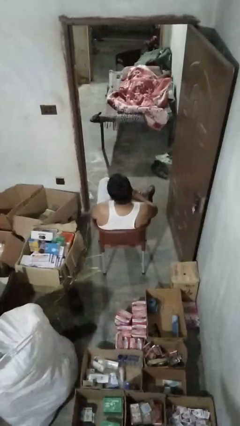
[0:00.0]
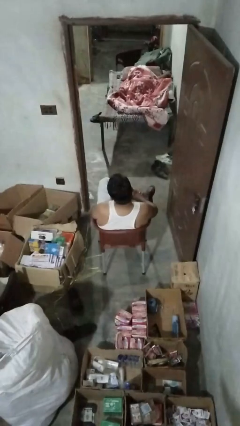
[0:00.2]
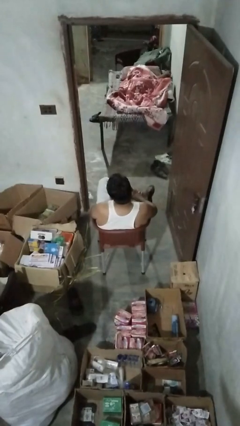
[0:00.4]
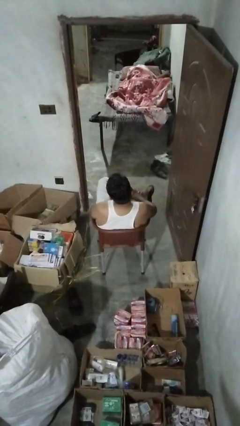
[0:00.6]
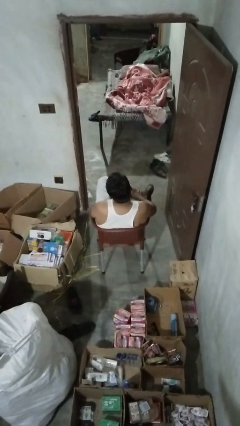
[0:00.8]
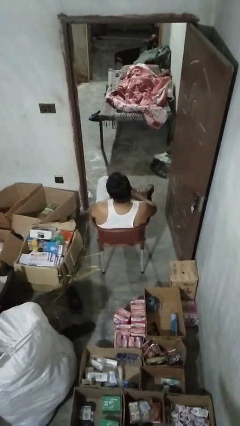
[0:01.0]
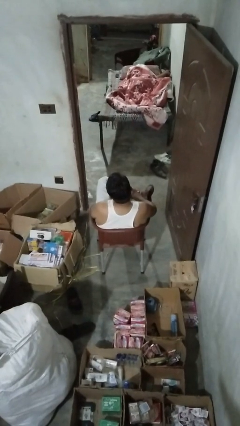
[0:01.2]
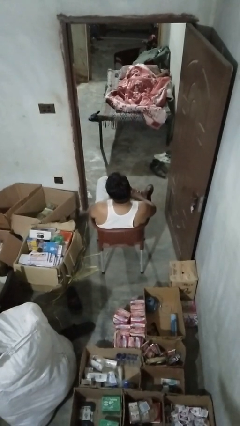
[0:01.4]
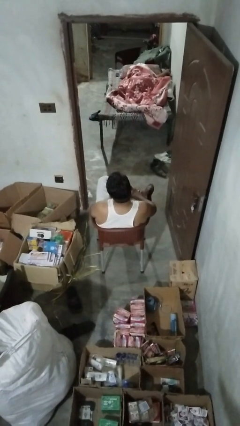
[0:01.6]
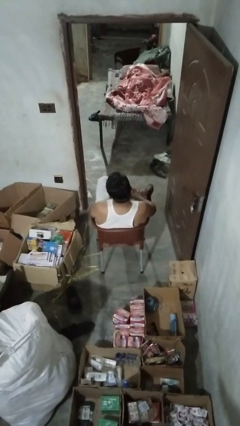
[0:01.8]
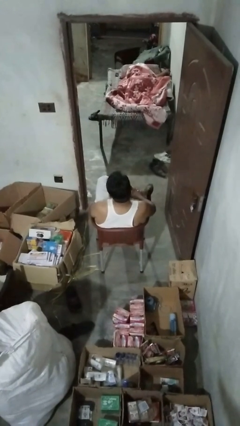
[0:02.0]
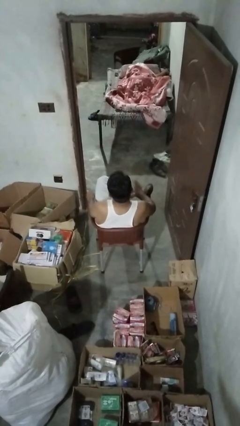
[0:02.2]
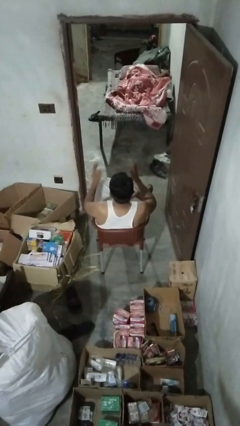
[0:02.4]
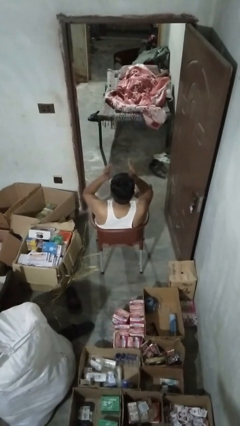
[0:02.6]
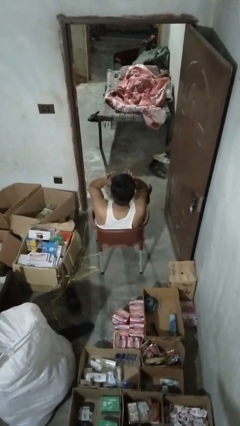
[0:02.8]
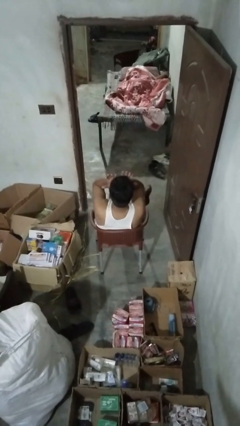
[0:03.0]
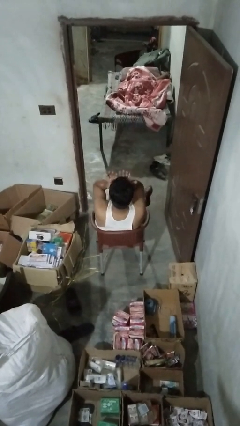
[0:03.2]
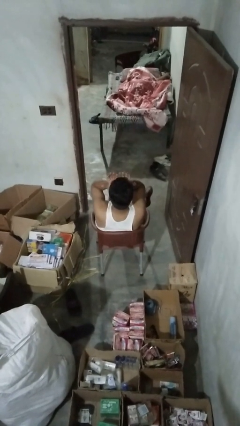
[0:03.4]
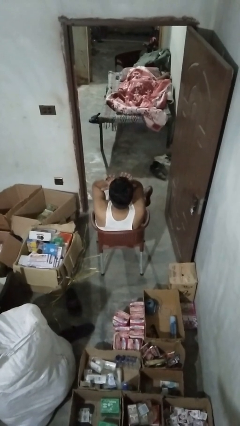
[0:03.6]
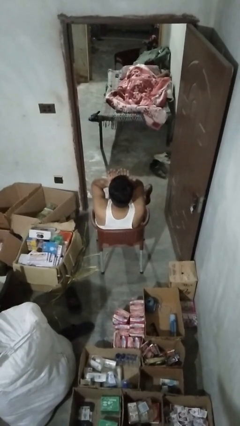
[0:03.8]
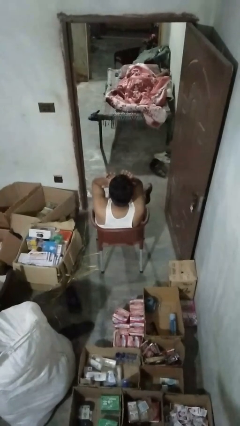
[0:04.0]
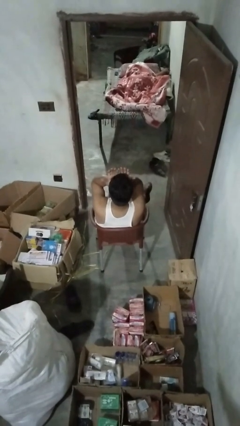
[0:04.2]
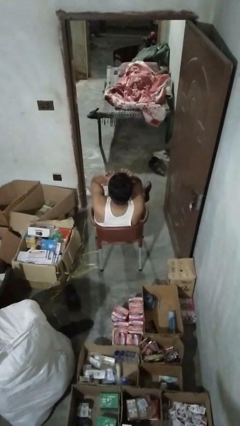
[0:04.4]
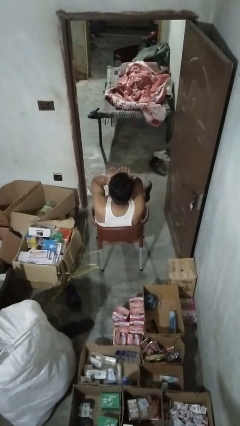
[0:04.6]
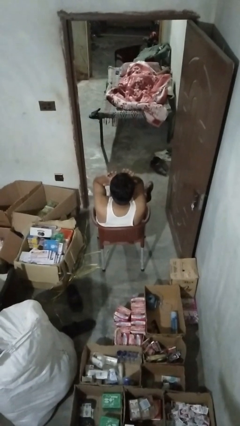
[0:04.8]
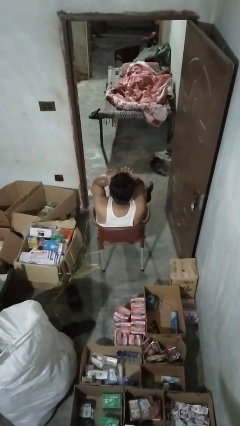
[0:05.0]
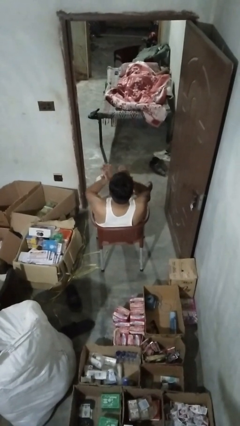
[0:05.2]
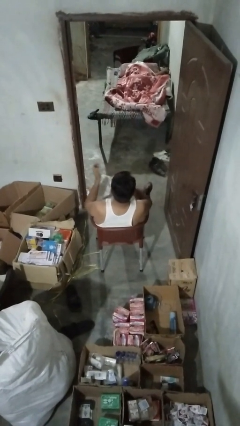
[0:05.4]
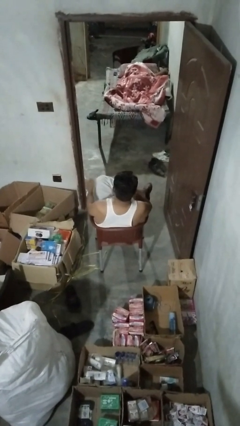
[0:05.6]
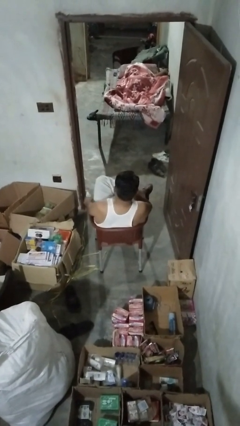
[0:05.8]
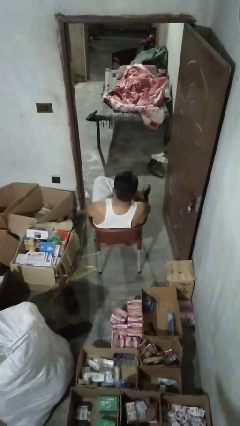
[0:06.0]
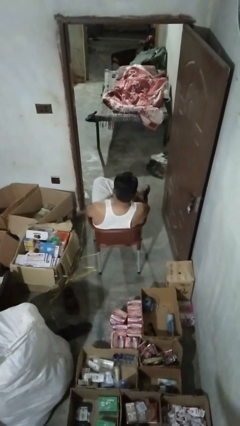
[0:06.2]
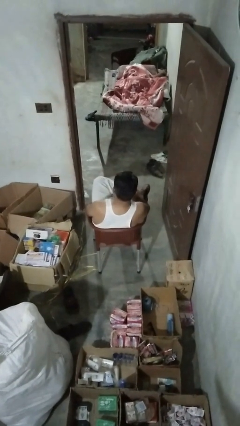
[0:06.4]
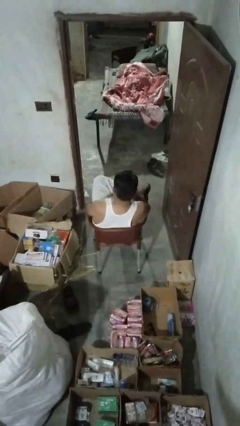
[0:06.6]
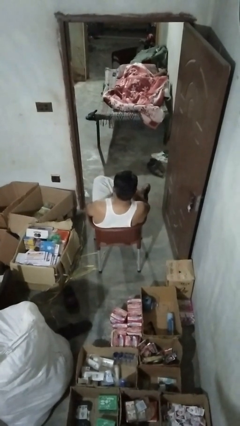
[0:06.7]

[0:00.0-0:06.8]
person rubs eyes

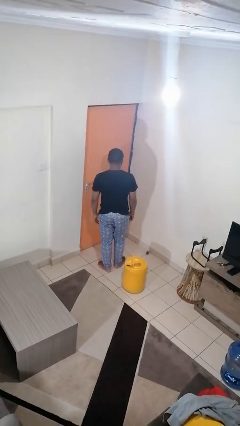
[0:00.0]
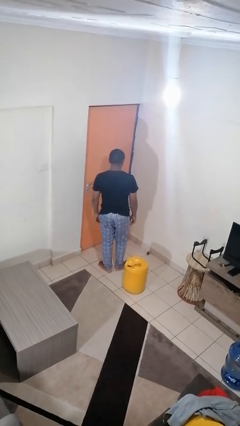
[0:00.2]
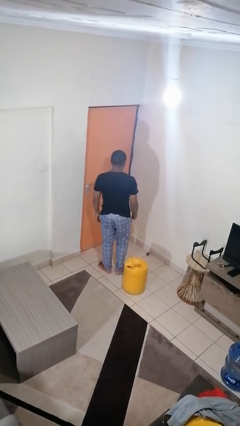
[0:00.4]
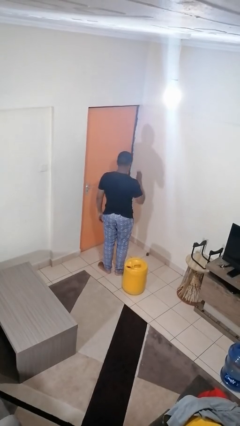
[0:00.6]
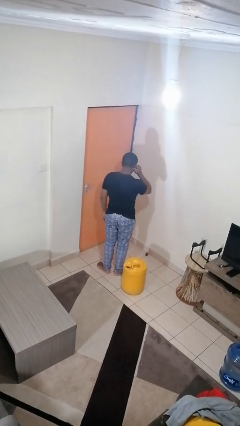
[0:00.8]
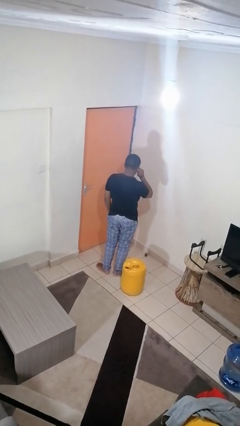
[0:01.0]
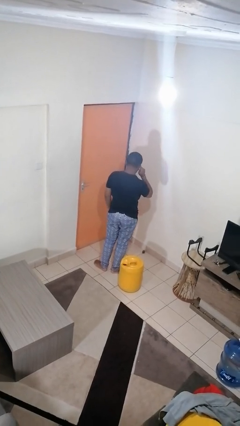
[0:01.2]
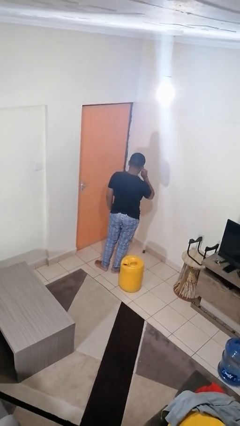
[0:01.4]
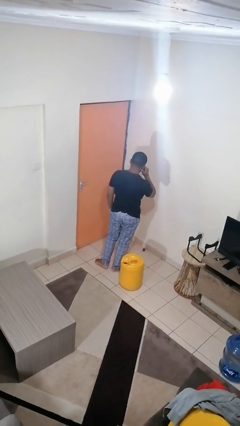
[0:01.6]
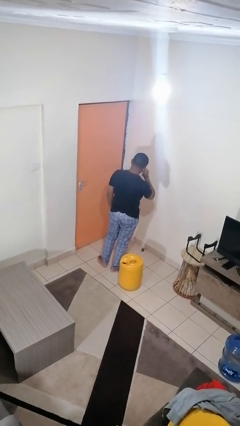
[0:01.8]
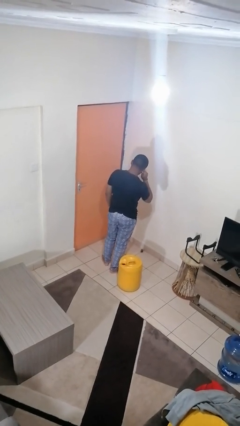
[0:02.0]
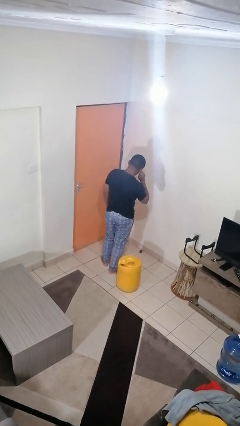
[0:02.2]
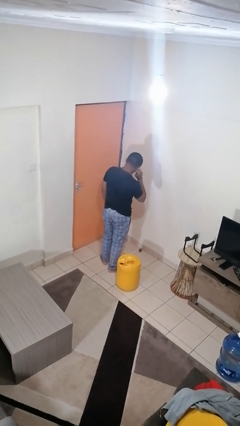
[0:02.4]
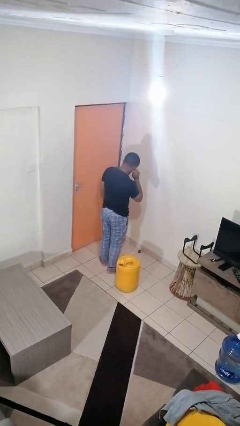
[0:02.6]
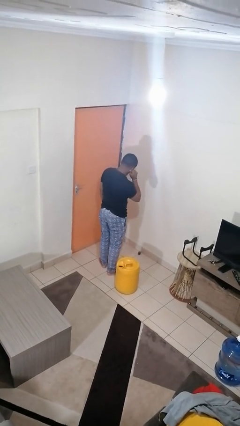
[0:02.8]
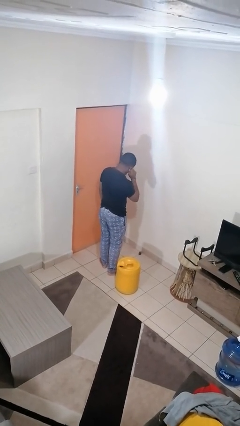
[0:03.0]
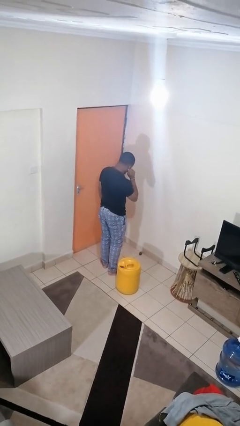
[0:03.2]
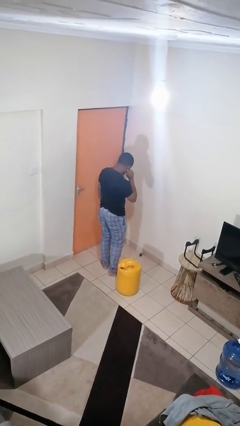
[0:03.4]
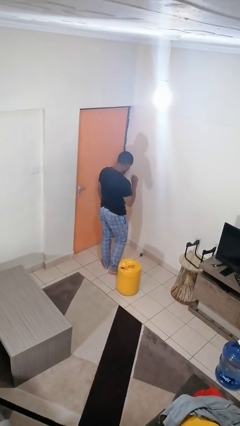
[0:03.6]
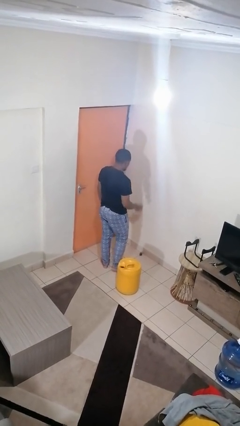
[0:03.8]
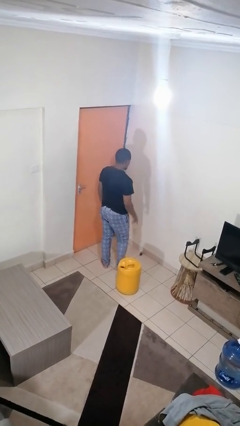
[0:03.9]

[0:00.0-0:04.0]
person touches earlobe

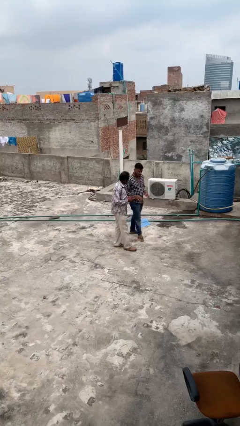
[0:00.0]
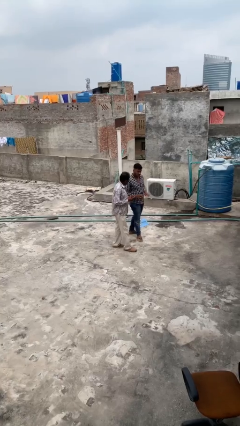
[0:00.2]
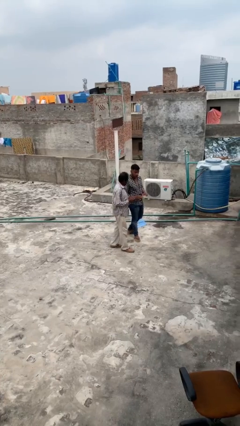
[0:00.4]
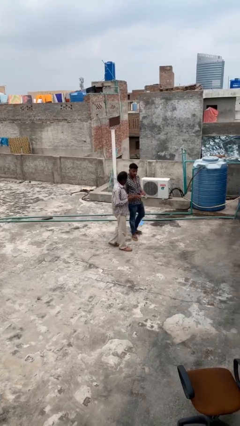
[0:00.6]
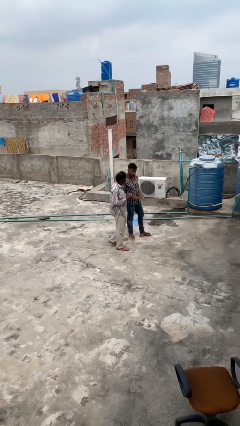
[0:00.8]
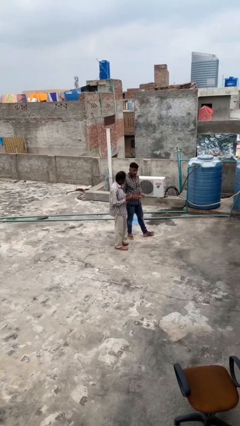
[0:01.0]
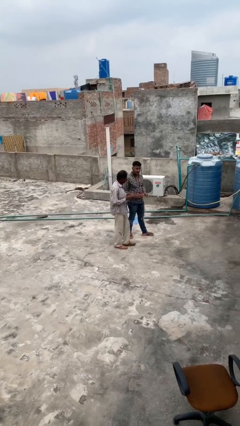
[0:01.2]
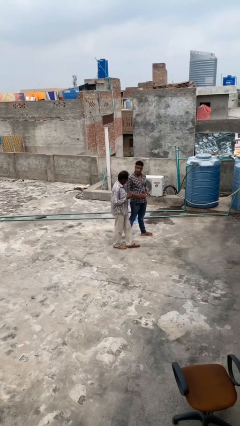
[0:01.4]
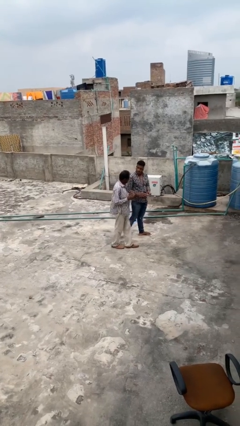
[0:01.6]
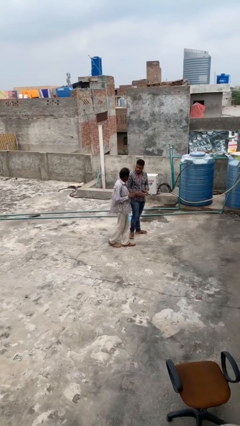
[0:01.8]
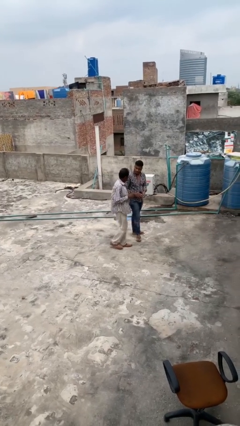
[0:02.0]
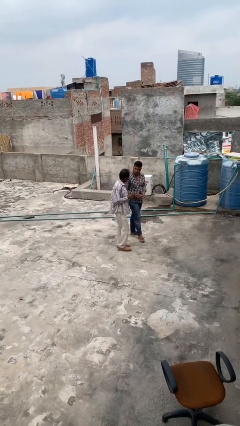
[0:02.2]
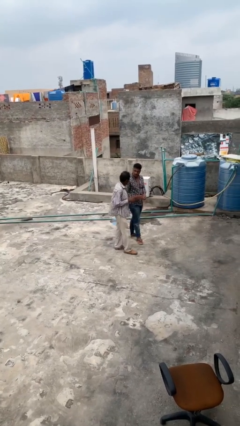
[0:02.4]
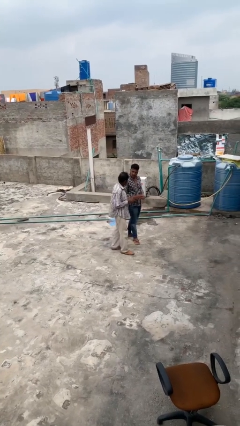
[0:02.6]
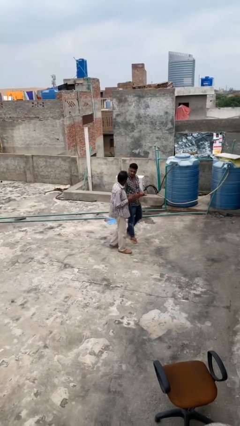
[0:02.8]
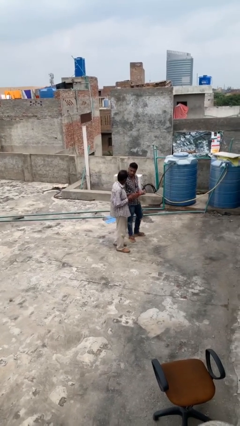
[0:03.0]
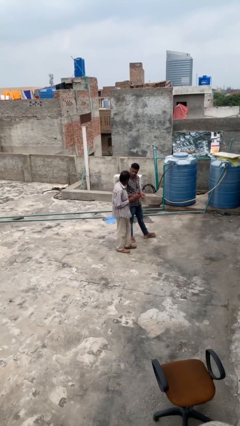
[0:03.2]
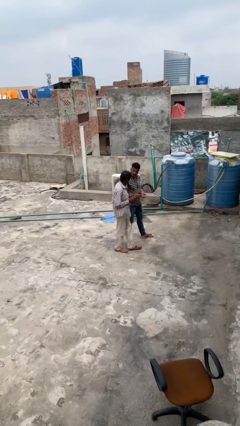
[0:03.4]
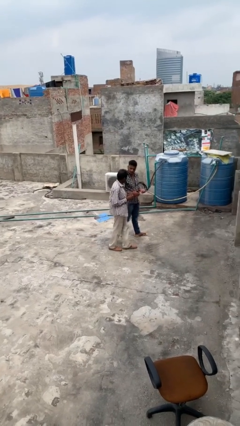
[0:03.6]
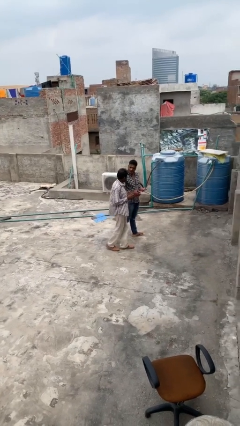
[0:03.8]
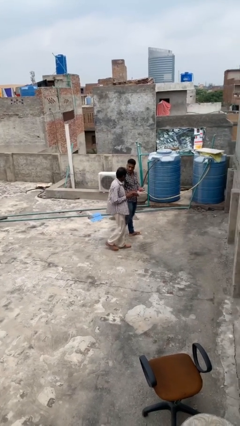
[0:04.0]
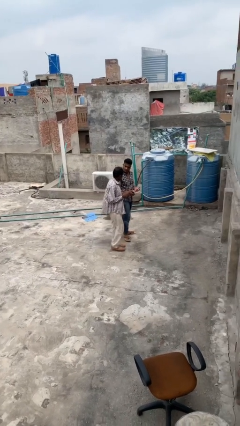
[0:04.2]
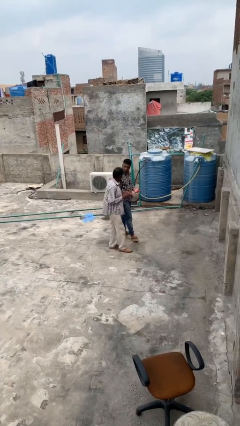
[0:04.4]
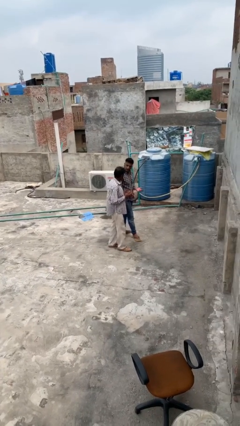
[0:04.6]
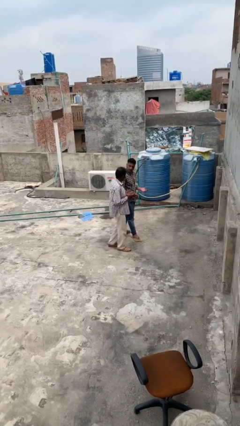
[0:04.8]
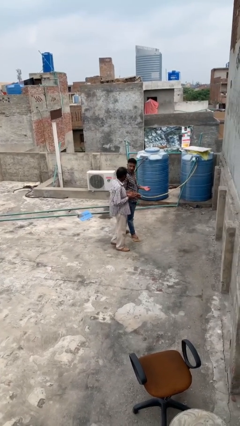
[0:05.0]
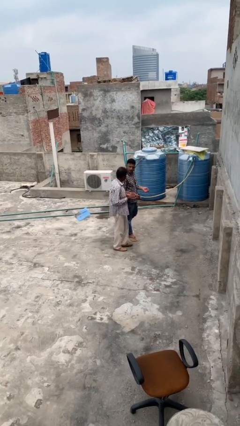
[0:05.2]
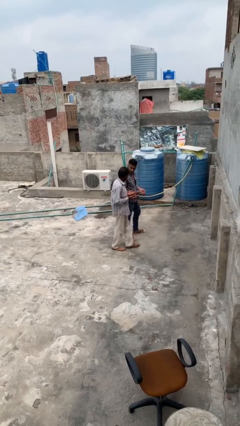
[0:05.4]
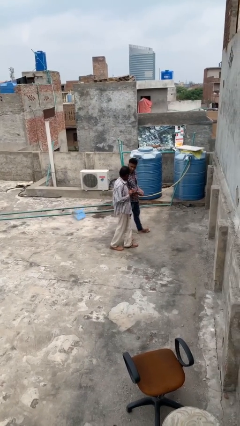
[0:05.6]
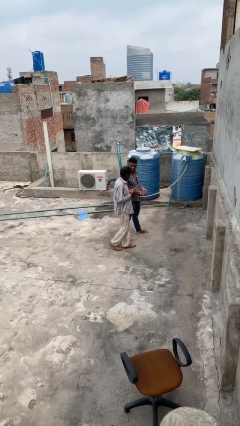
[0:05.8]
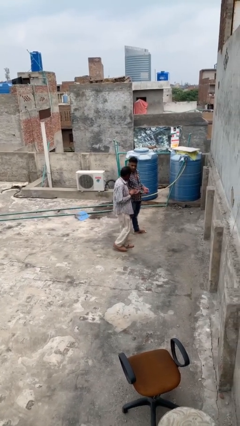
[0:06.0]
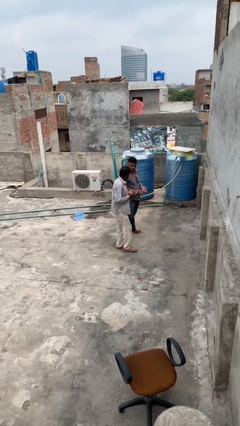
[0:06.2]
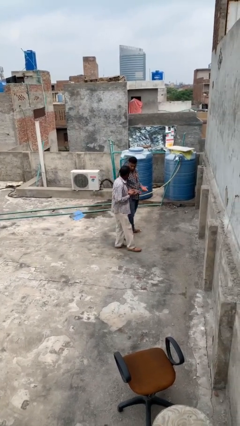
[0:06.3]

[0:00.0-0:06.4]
person talks to person

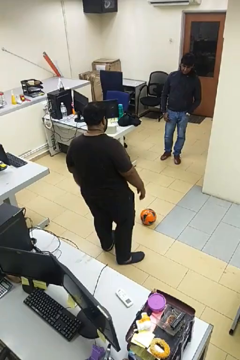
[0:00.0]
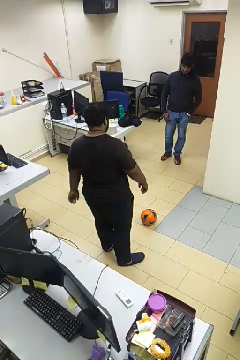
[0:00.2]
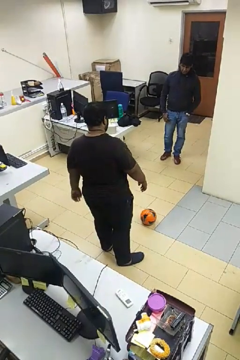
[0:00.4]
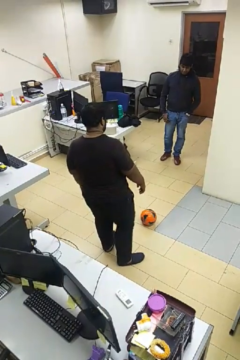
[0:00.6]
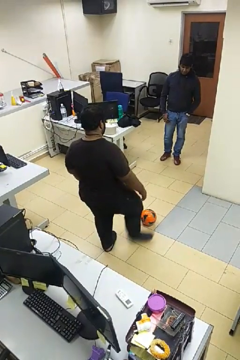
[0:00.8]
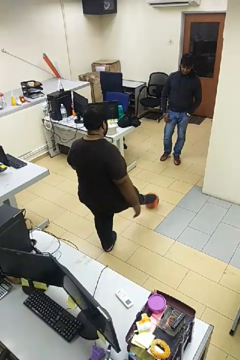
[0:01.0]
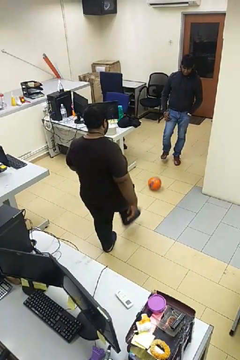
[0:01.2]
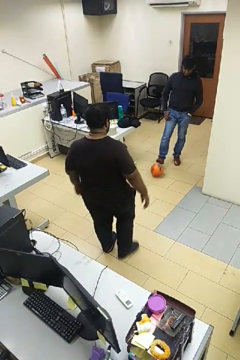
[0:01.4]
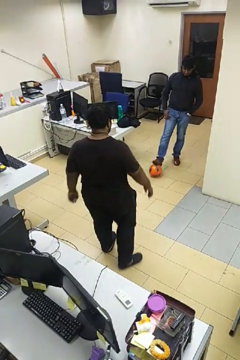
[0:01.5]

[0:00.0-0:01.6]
person kicks object to person
